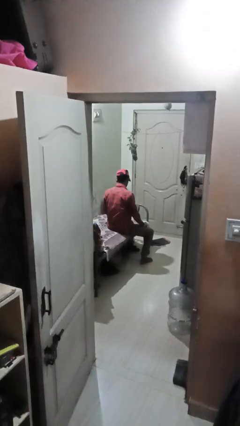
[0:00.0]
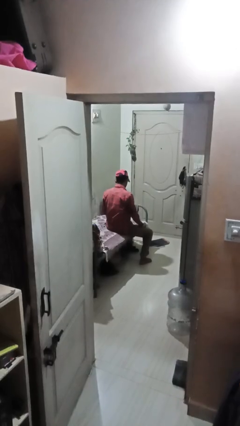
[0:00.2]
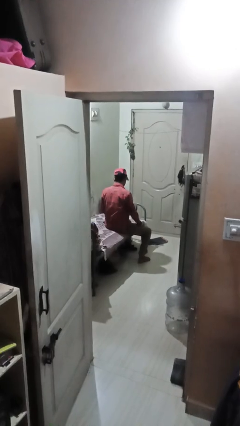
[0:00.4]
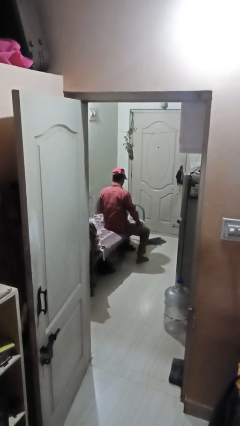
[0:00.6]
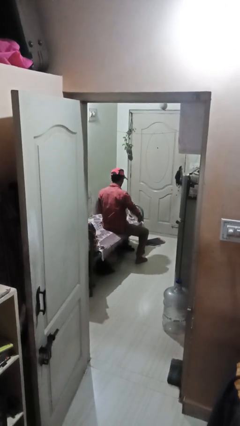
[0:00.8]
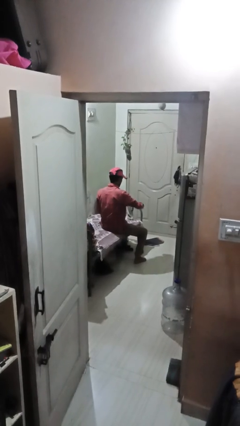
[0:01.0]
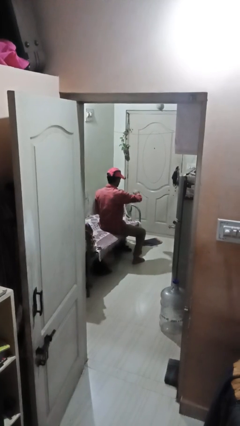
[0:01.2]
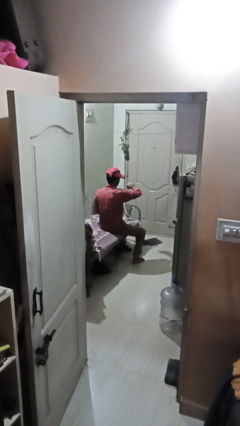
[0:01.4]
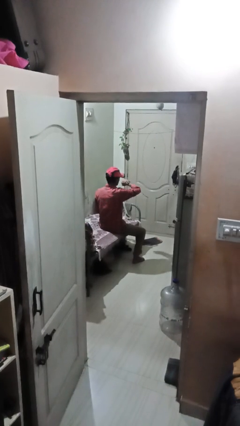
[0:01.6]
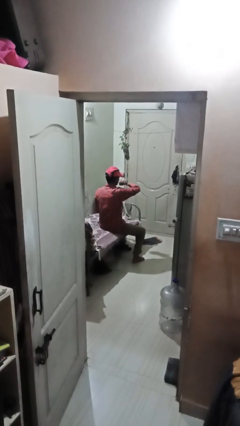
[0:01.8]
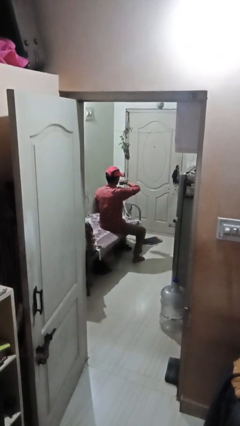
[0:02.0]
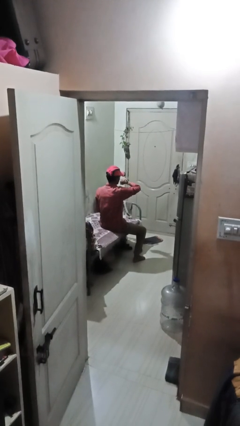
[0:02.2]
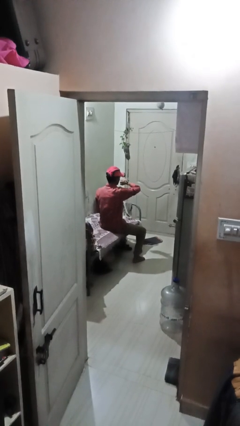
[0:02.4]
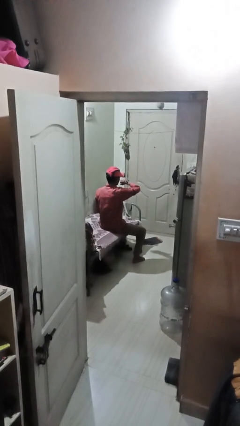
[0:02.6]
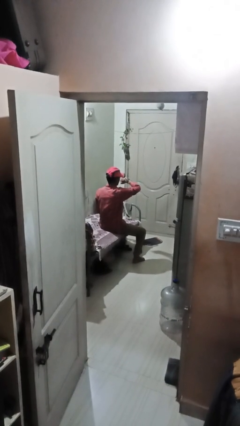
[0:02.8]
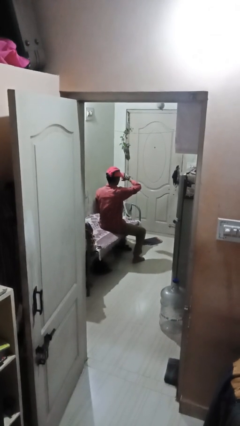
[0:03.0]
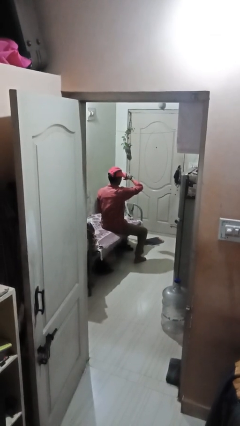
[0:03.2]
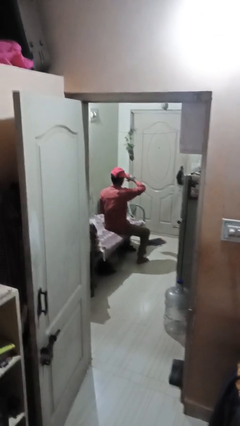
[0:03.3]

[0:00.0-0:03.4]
person looks at wristwatch

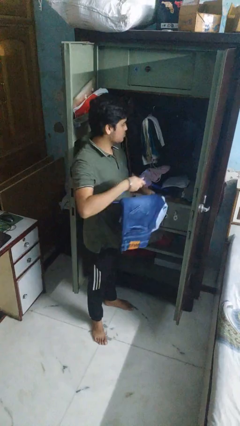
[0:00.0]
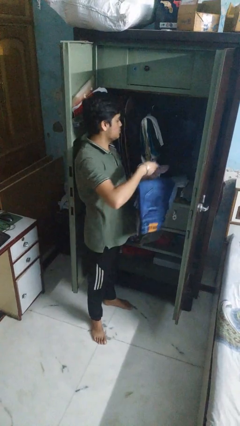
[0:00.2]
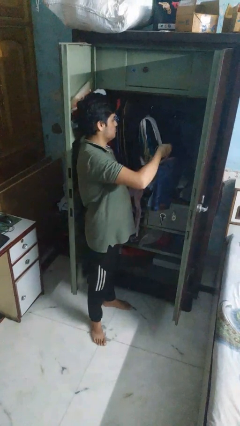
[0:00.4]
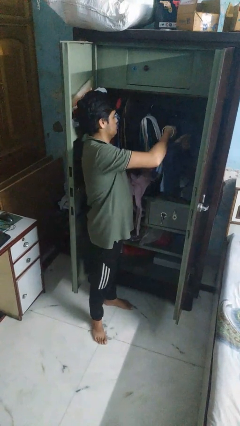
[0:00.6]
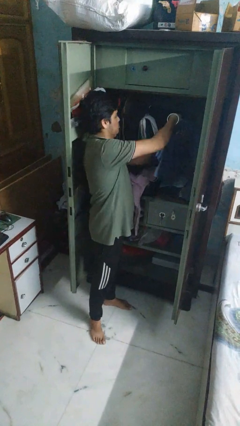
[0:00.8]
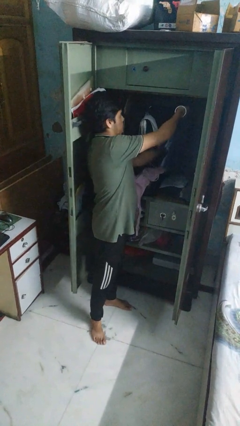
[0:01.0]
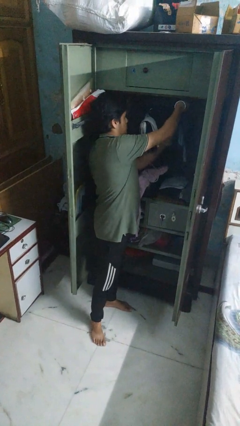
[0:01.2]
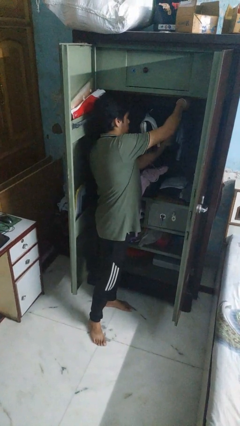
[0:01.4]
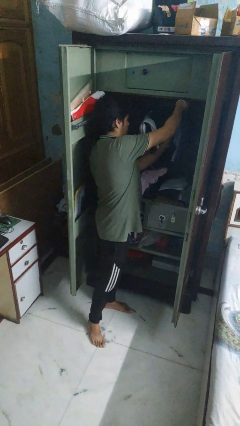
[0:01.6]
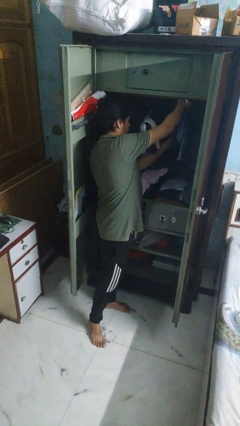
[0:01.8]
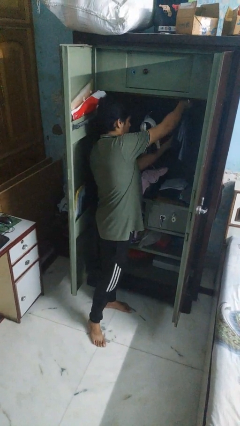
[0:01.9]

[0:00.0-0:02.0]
person puts clothes into closet

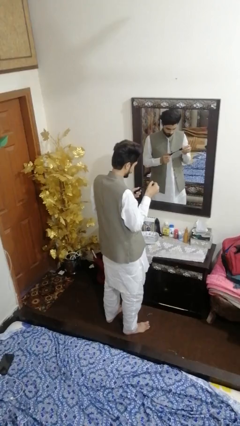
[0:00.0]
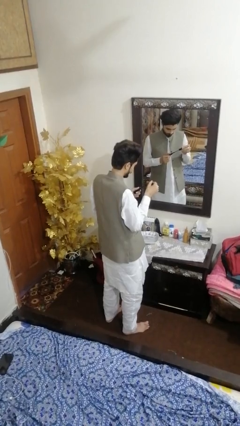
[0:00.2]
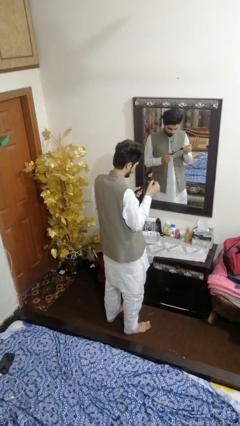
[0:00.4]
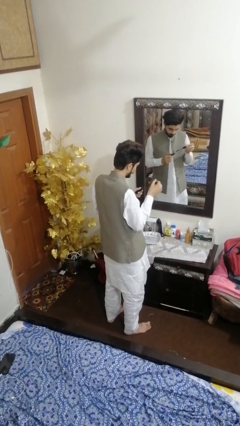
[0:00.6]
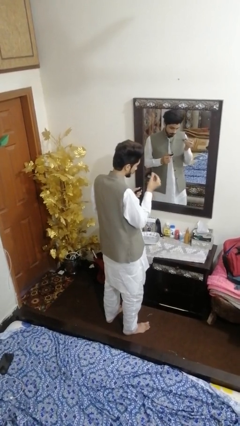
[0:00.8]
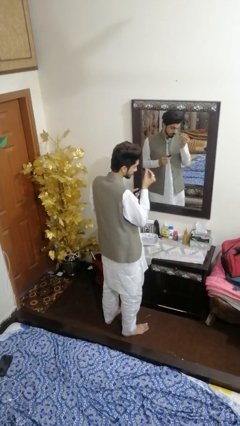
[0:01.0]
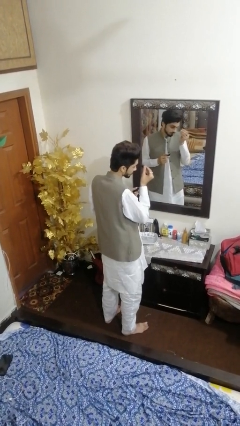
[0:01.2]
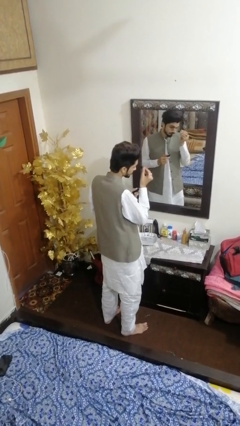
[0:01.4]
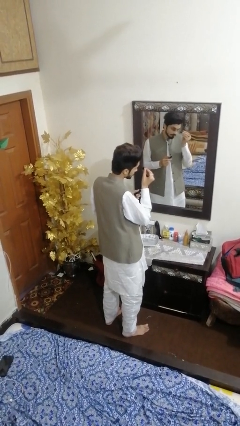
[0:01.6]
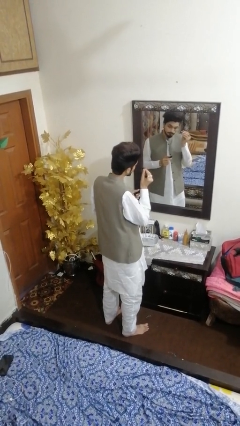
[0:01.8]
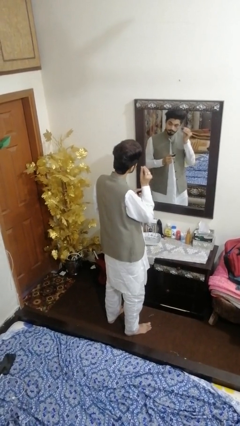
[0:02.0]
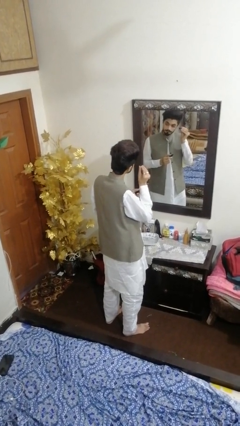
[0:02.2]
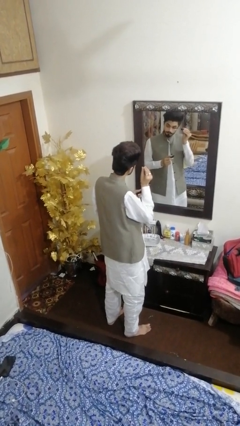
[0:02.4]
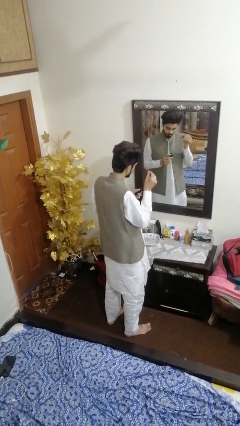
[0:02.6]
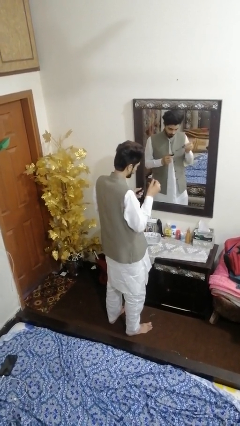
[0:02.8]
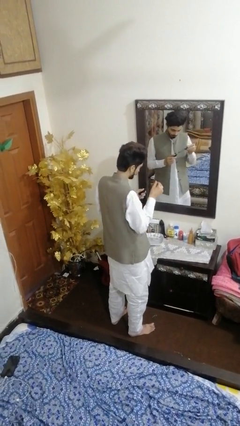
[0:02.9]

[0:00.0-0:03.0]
person applies eye makeup

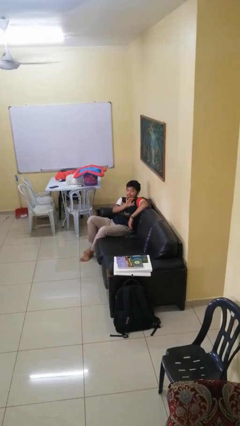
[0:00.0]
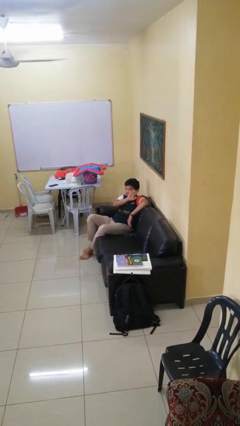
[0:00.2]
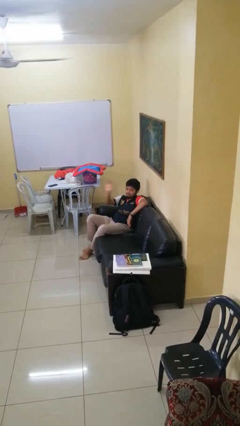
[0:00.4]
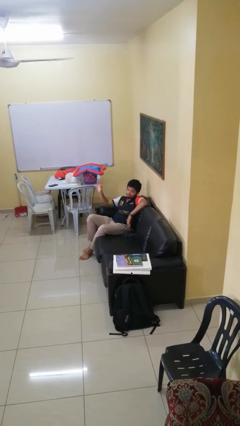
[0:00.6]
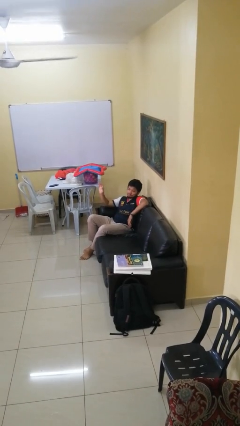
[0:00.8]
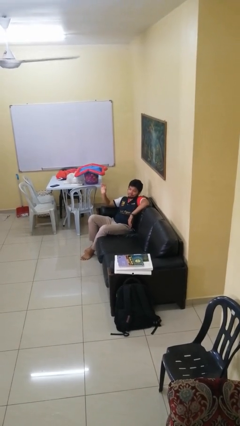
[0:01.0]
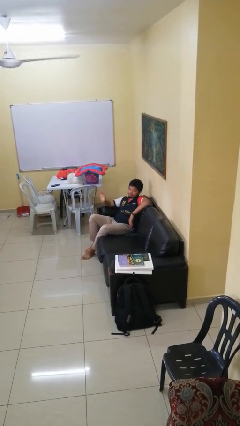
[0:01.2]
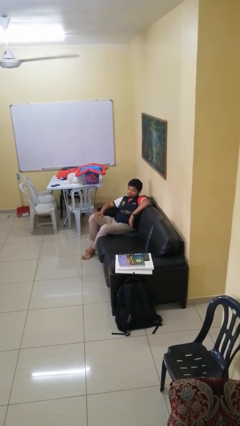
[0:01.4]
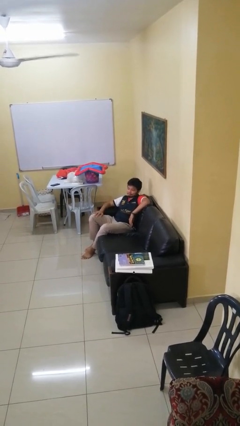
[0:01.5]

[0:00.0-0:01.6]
person gestures swipe right

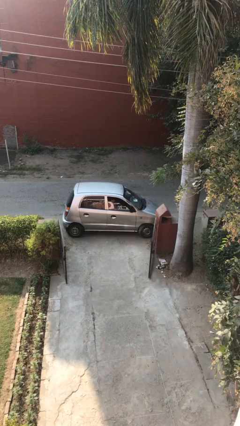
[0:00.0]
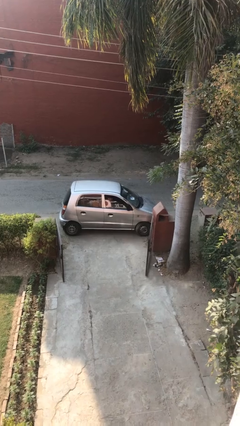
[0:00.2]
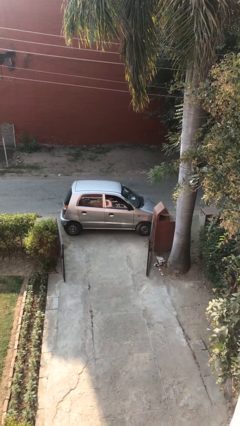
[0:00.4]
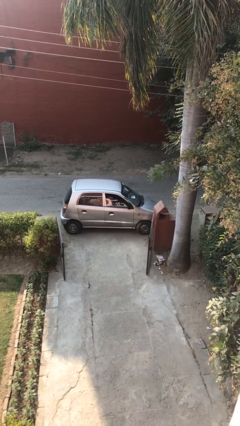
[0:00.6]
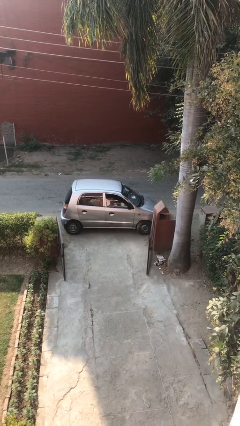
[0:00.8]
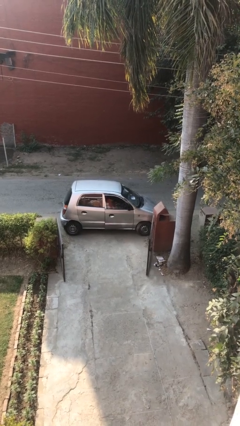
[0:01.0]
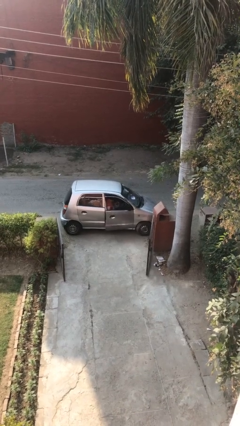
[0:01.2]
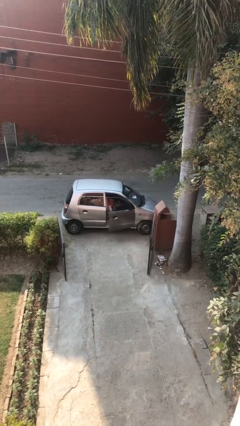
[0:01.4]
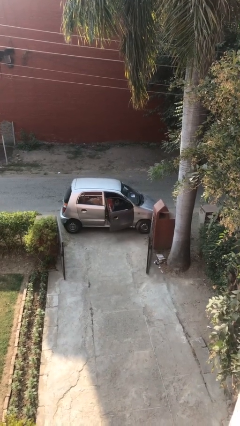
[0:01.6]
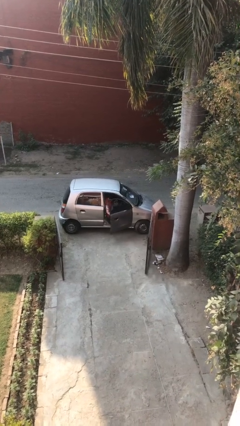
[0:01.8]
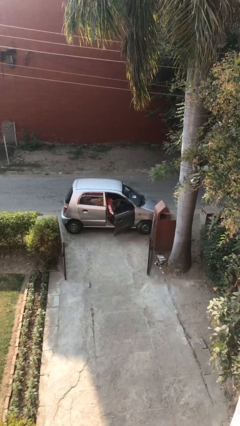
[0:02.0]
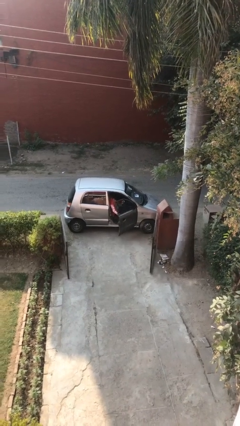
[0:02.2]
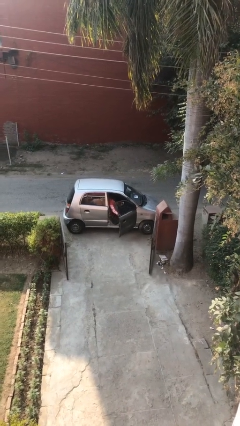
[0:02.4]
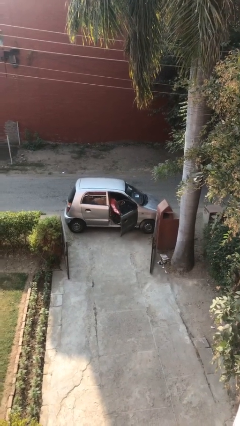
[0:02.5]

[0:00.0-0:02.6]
person opens car door

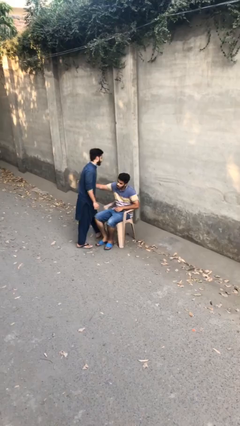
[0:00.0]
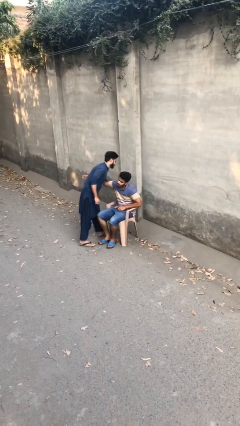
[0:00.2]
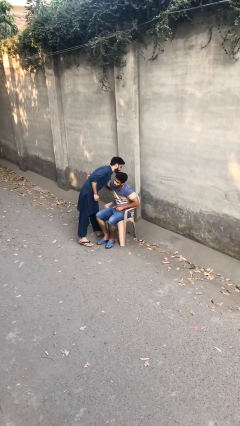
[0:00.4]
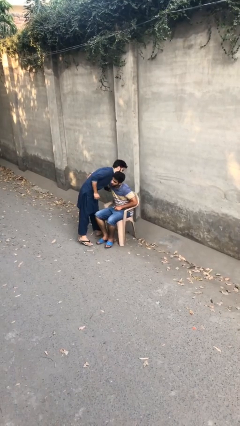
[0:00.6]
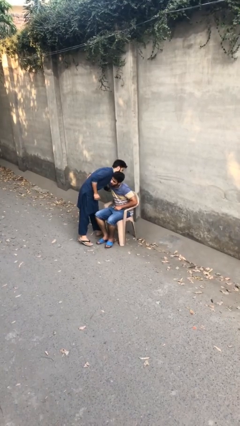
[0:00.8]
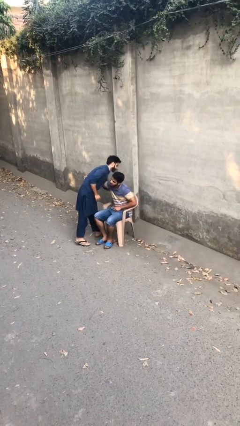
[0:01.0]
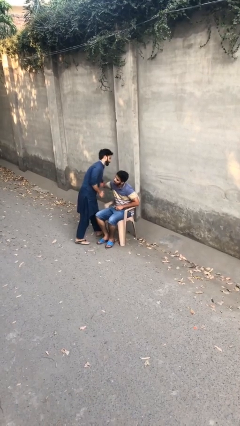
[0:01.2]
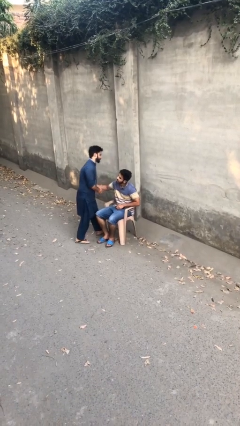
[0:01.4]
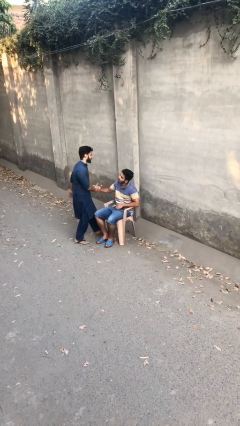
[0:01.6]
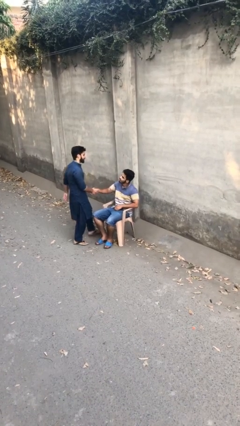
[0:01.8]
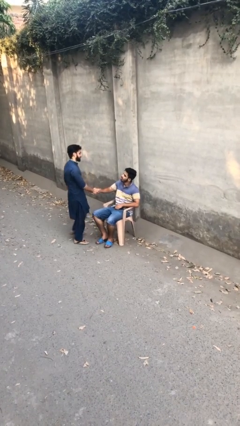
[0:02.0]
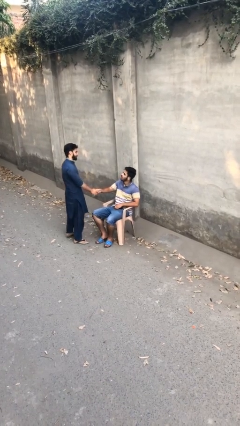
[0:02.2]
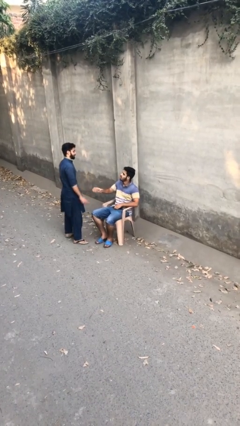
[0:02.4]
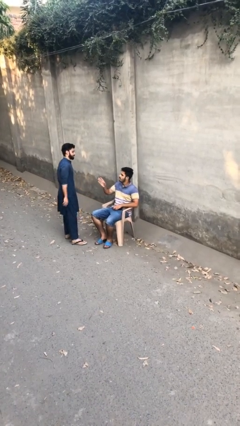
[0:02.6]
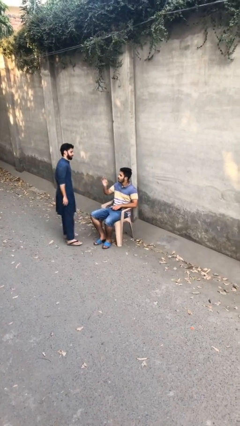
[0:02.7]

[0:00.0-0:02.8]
person embraces person

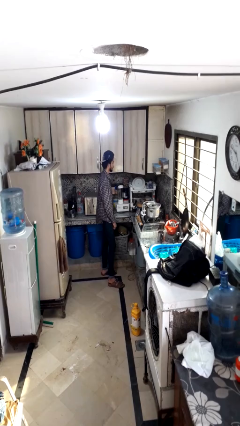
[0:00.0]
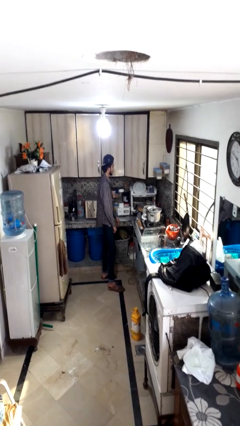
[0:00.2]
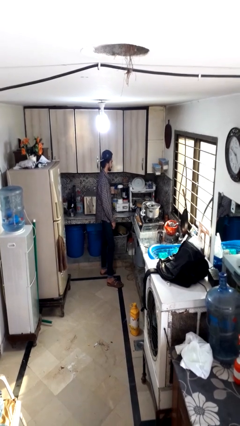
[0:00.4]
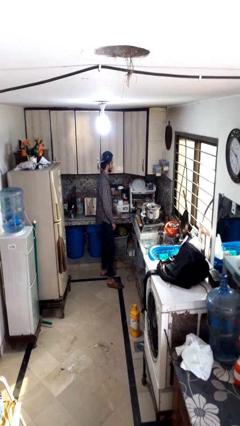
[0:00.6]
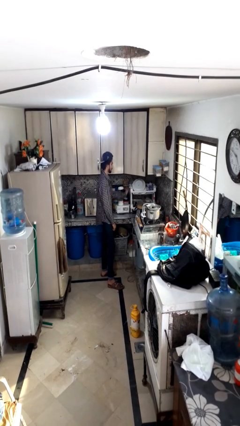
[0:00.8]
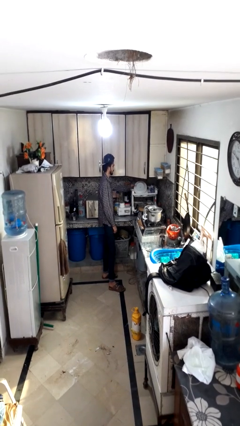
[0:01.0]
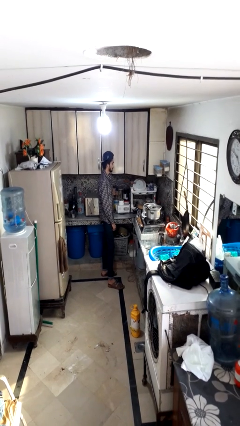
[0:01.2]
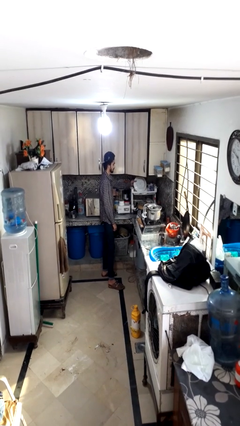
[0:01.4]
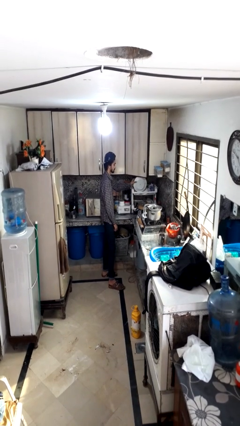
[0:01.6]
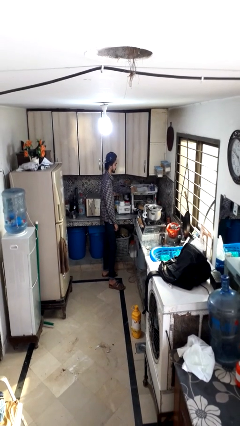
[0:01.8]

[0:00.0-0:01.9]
person unloads dishwasher
